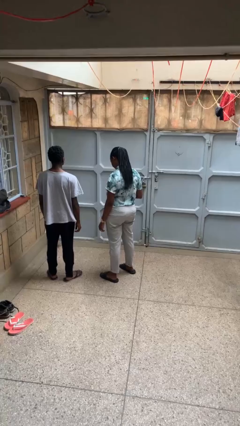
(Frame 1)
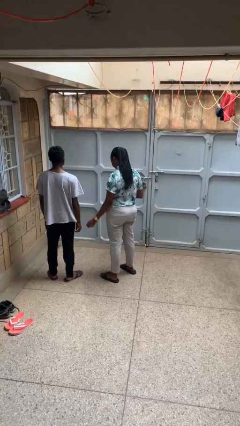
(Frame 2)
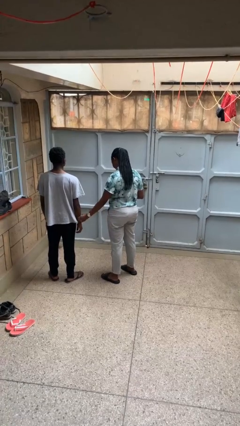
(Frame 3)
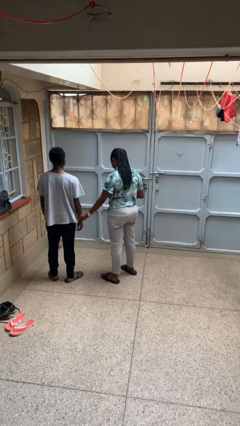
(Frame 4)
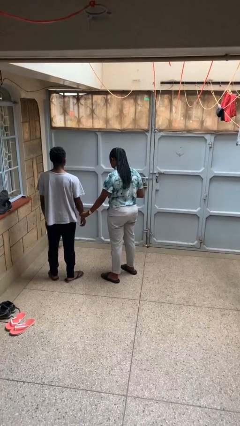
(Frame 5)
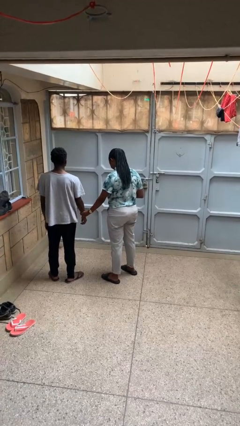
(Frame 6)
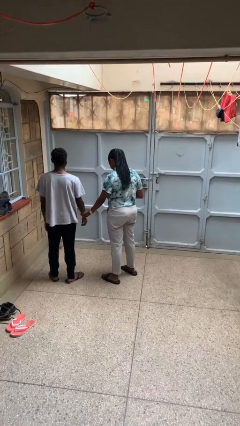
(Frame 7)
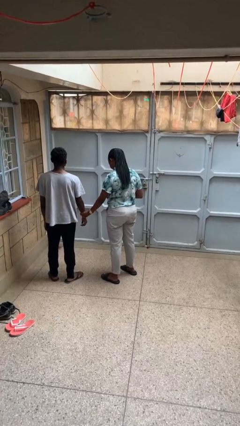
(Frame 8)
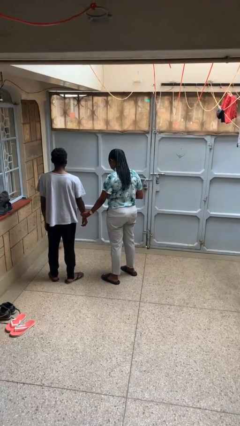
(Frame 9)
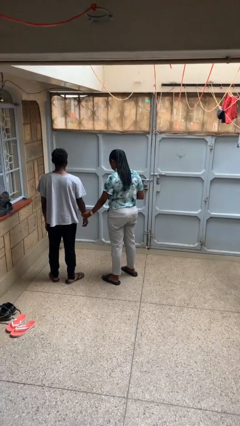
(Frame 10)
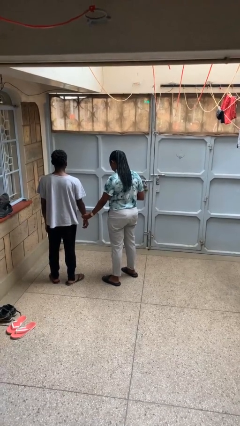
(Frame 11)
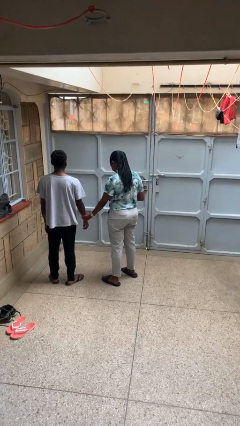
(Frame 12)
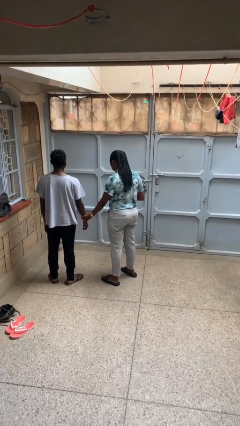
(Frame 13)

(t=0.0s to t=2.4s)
person grabs person by forearm

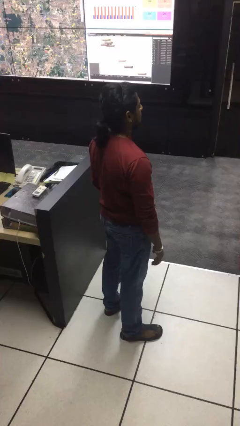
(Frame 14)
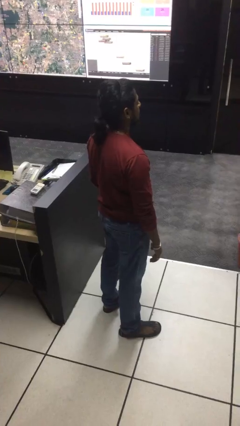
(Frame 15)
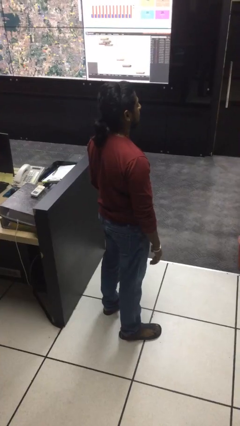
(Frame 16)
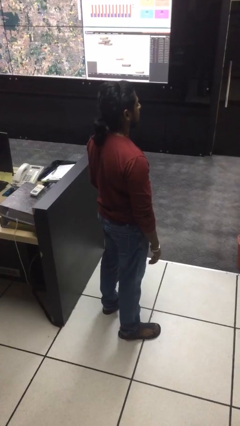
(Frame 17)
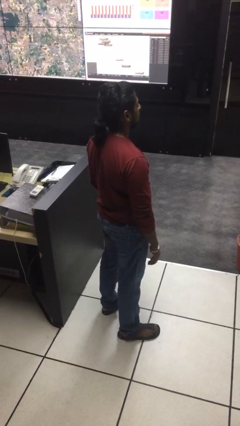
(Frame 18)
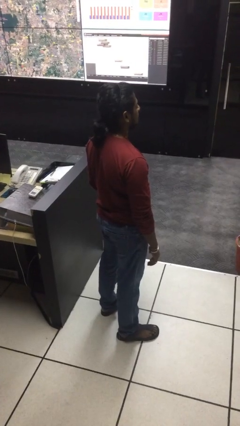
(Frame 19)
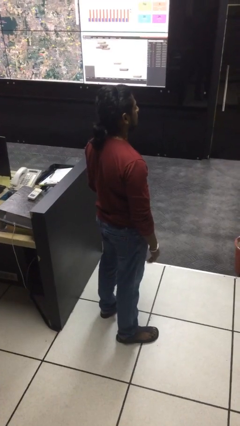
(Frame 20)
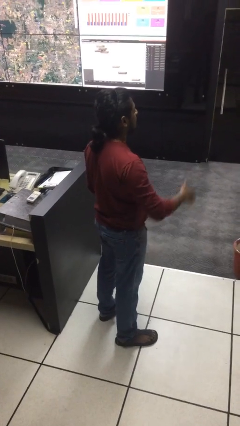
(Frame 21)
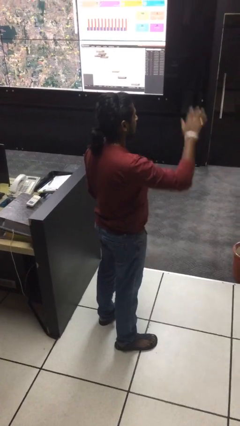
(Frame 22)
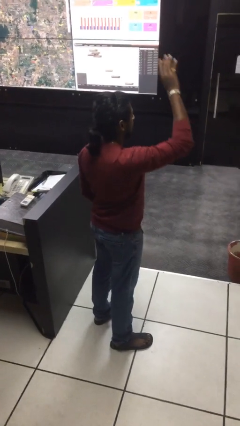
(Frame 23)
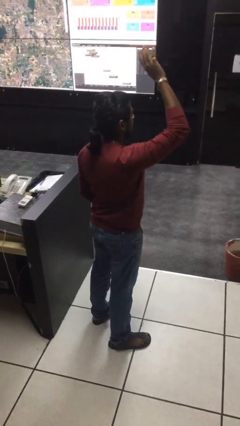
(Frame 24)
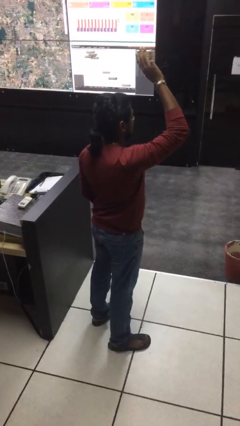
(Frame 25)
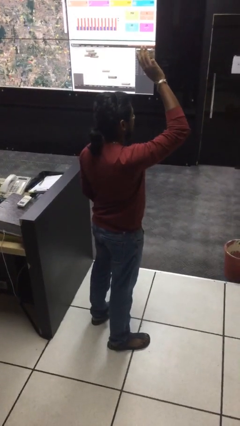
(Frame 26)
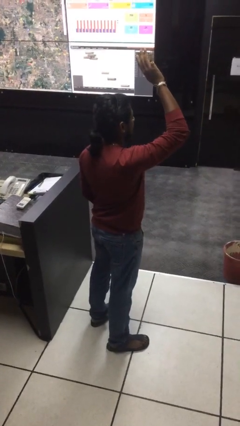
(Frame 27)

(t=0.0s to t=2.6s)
person gestures raise hand

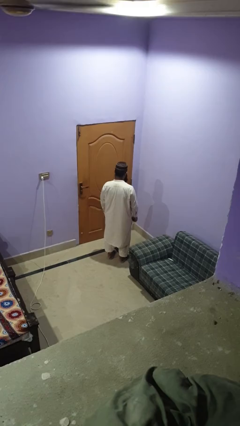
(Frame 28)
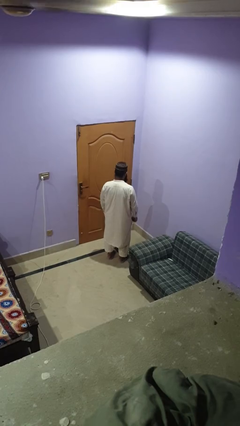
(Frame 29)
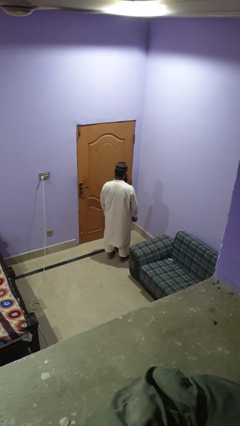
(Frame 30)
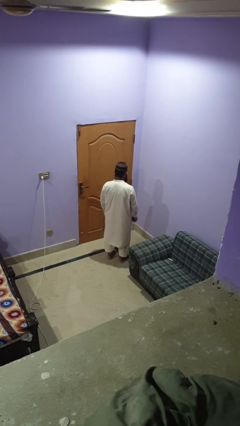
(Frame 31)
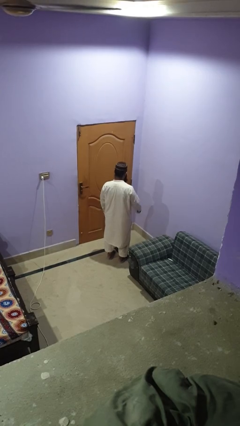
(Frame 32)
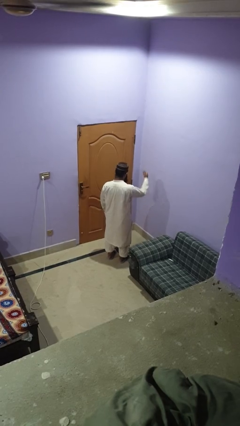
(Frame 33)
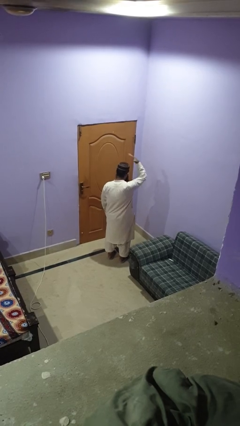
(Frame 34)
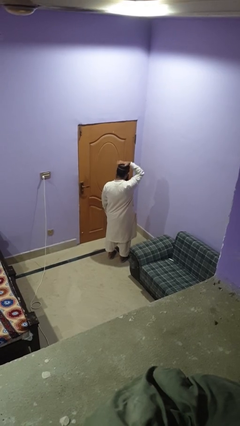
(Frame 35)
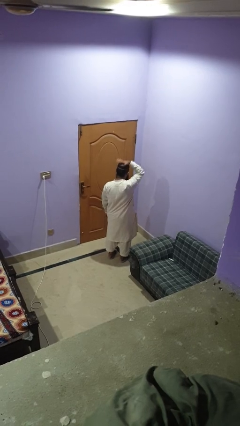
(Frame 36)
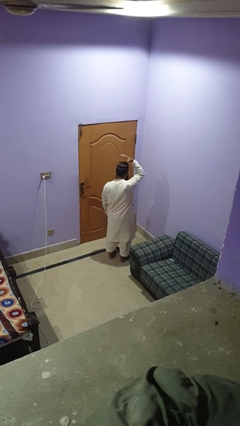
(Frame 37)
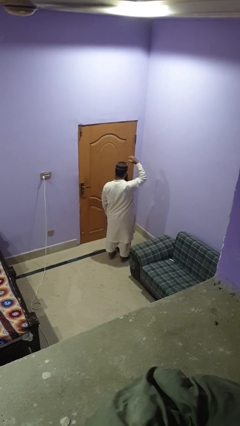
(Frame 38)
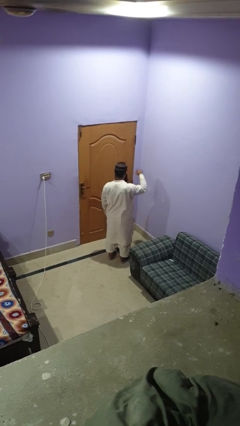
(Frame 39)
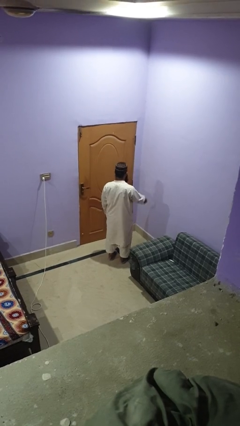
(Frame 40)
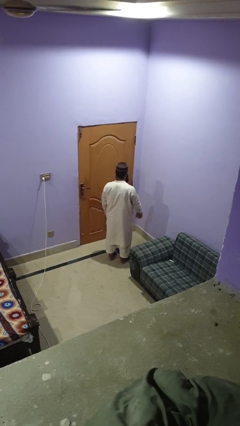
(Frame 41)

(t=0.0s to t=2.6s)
person pats head

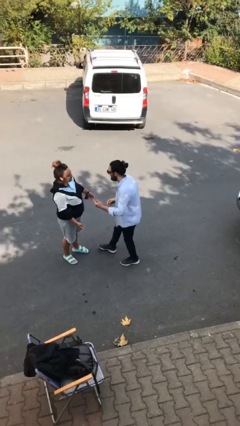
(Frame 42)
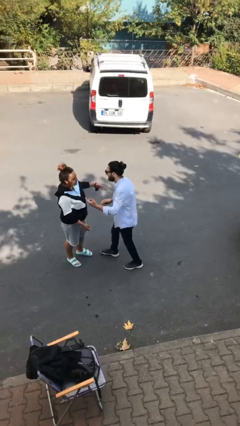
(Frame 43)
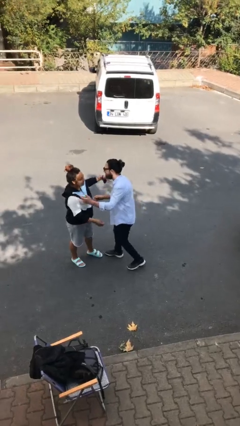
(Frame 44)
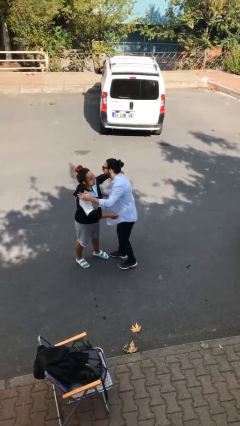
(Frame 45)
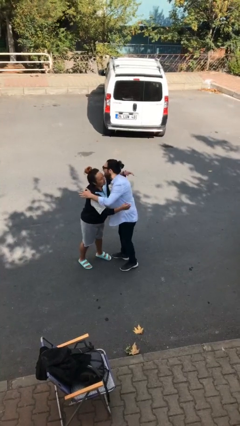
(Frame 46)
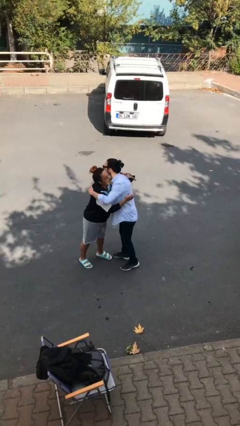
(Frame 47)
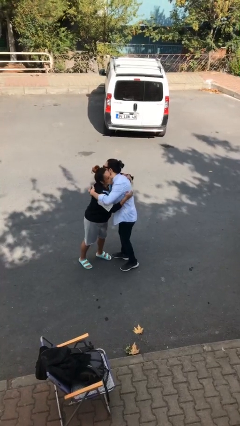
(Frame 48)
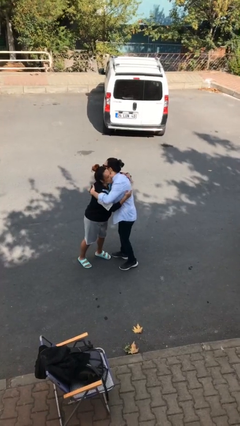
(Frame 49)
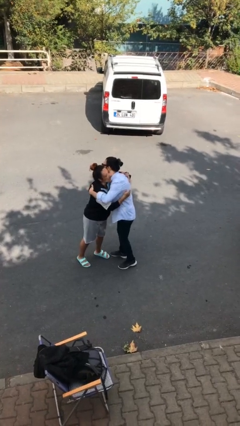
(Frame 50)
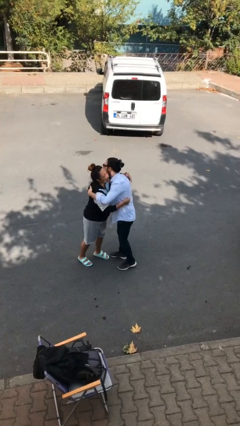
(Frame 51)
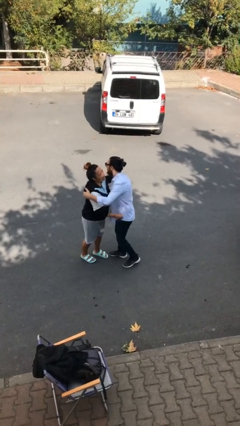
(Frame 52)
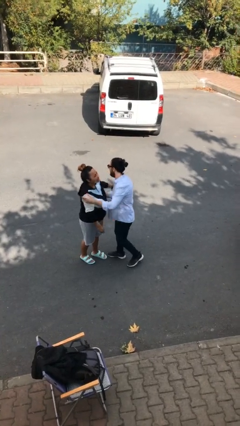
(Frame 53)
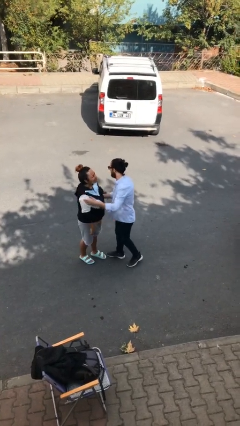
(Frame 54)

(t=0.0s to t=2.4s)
person embraces person

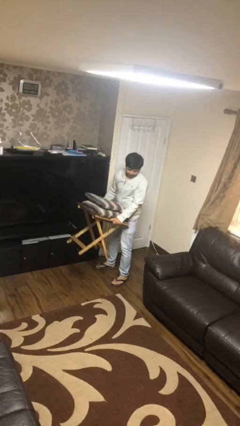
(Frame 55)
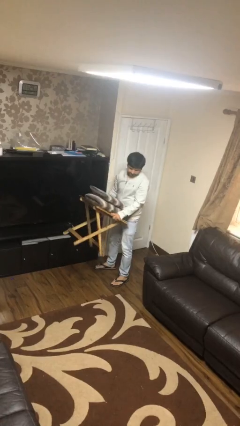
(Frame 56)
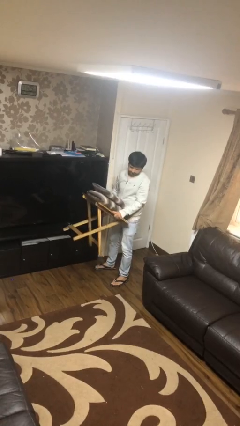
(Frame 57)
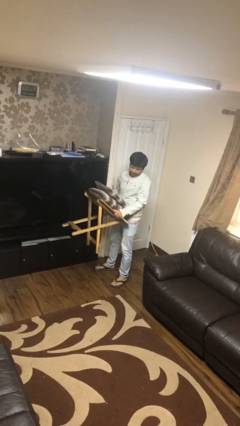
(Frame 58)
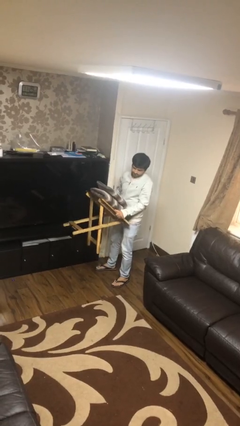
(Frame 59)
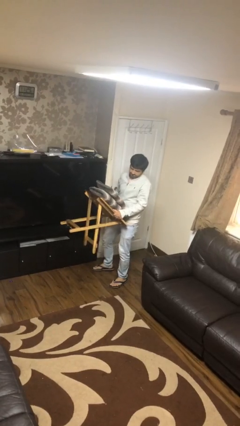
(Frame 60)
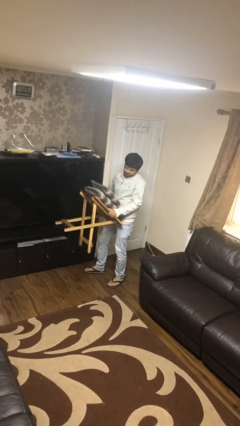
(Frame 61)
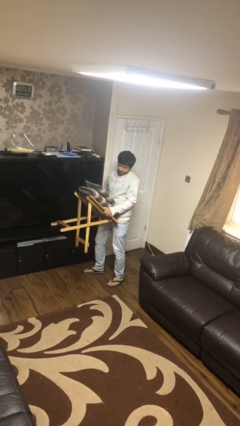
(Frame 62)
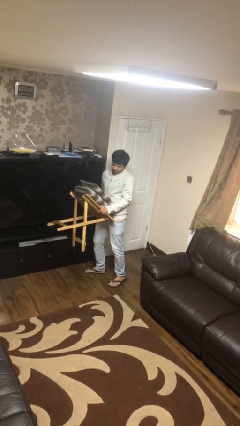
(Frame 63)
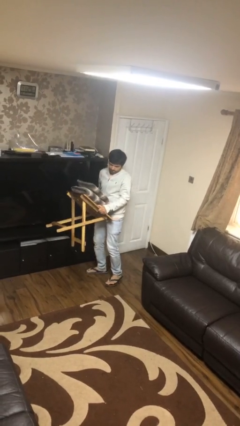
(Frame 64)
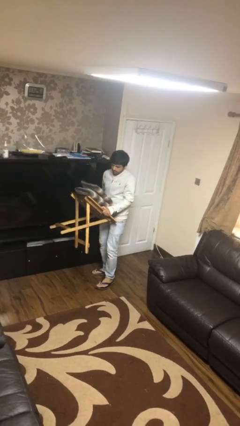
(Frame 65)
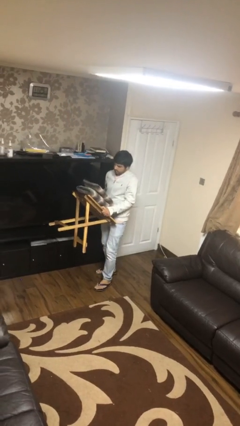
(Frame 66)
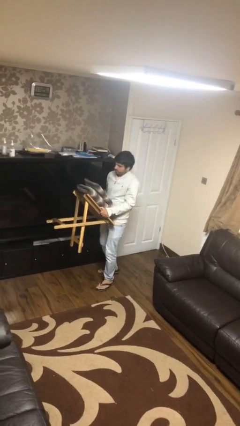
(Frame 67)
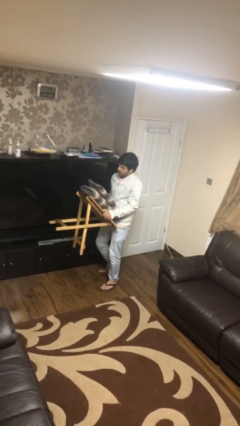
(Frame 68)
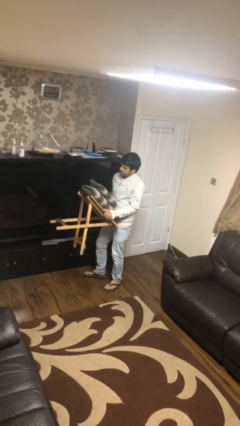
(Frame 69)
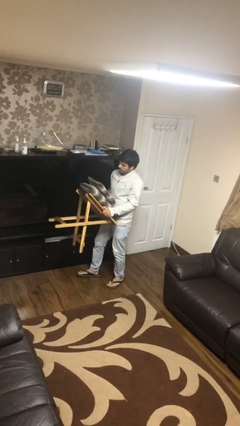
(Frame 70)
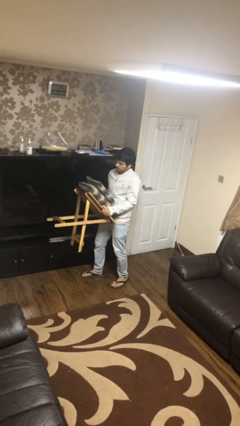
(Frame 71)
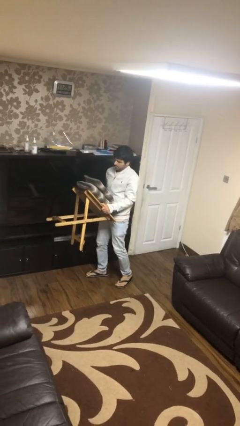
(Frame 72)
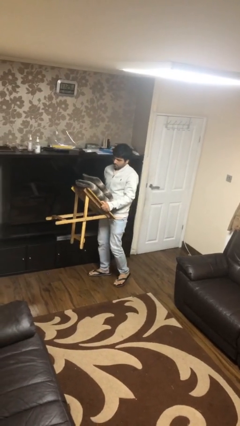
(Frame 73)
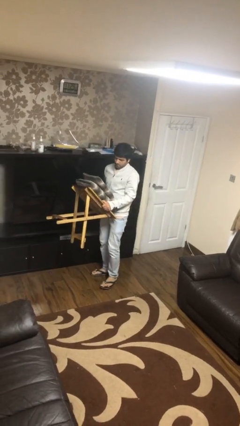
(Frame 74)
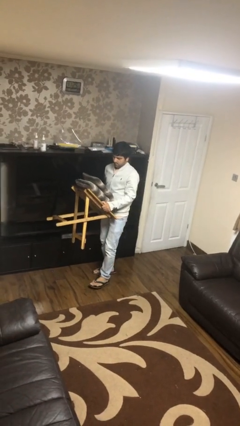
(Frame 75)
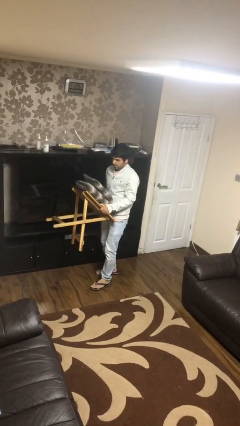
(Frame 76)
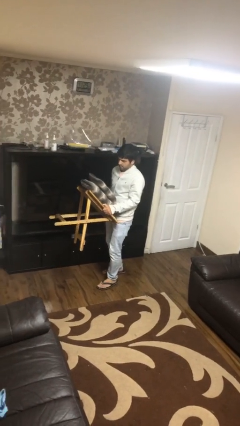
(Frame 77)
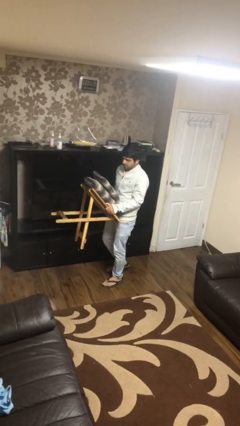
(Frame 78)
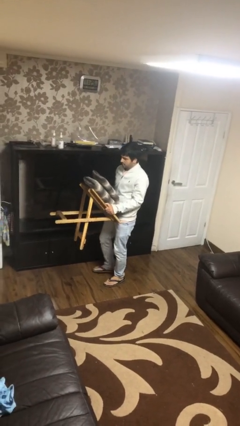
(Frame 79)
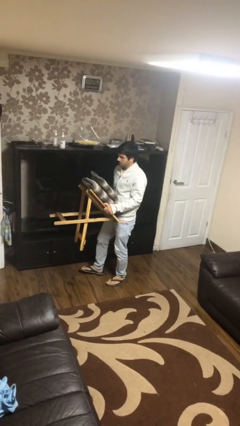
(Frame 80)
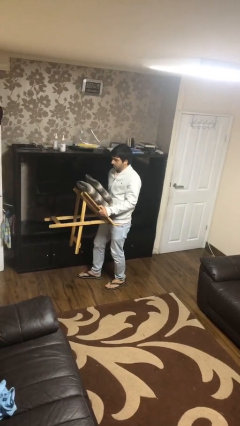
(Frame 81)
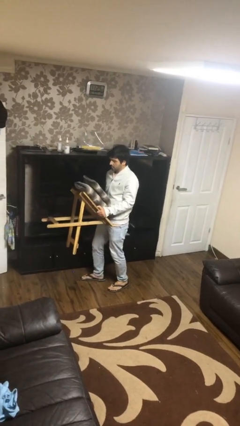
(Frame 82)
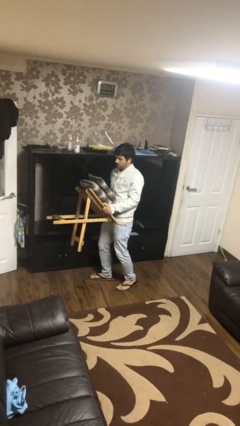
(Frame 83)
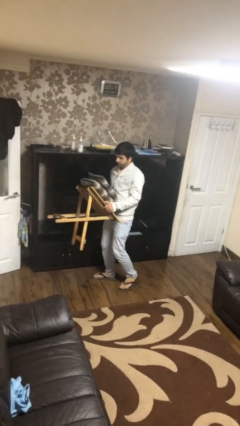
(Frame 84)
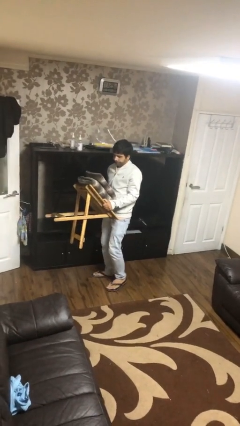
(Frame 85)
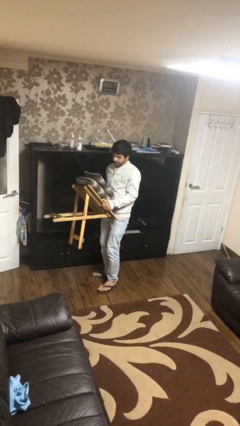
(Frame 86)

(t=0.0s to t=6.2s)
person carries heavy object

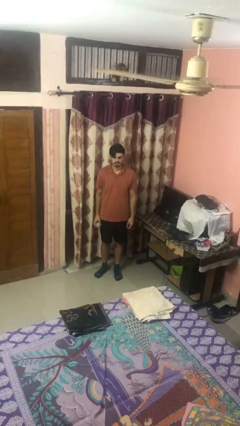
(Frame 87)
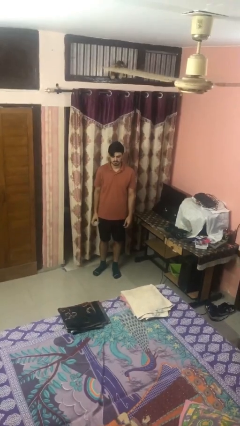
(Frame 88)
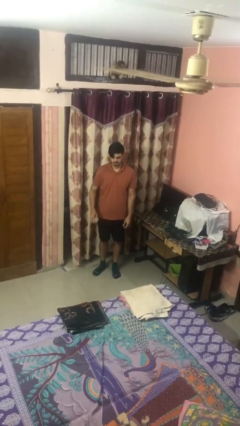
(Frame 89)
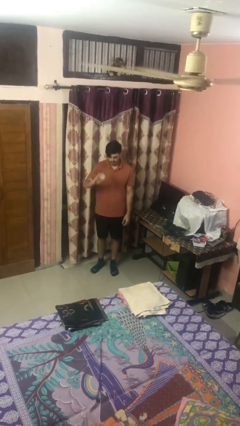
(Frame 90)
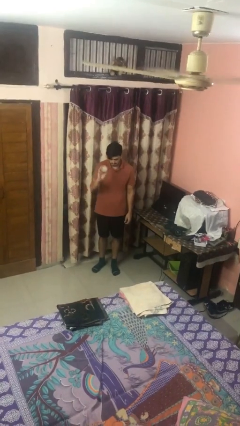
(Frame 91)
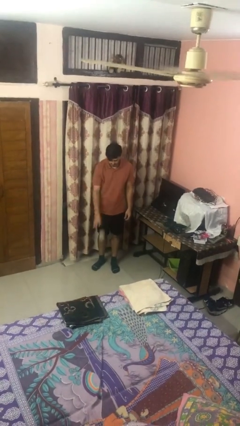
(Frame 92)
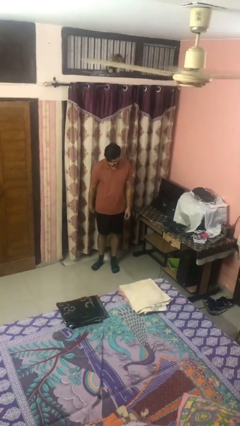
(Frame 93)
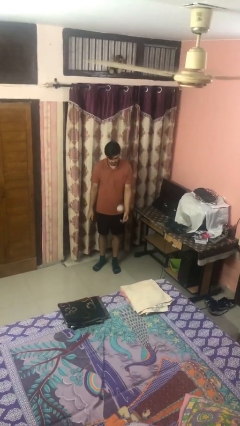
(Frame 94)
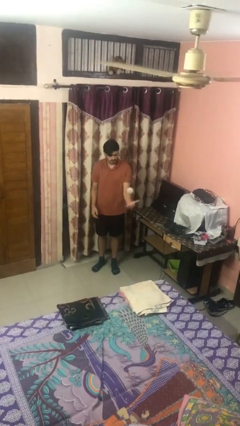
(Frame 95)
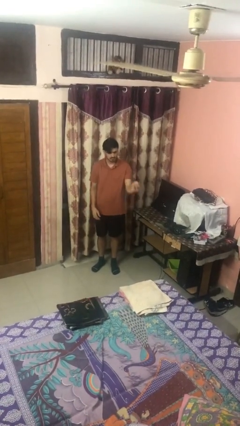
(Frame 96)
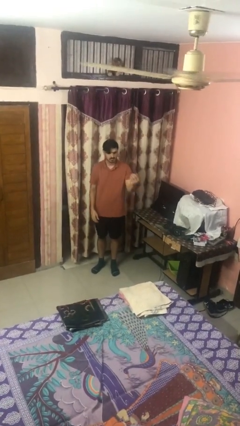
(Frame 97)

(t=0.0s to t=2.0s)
person bounces ball on floor
